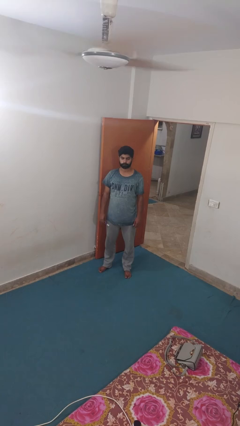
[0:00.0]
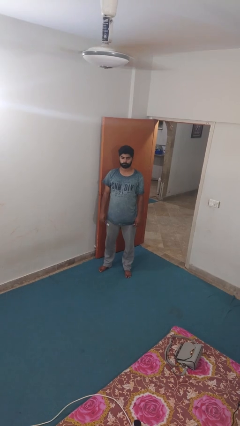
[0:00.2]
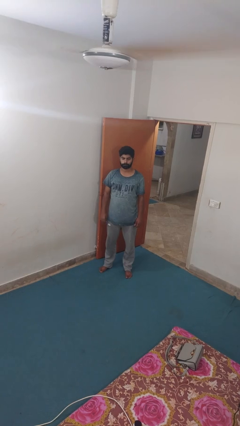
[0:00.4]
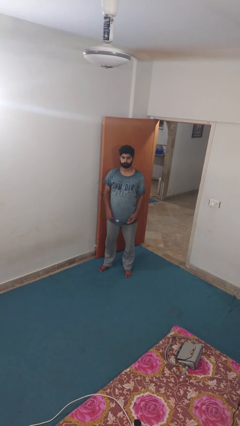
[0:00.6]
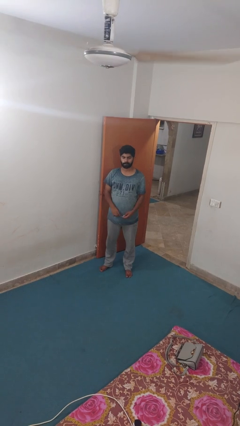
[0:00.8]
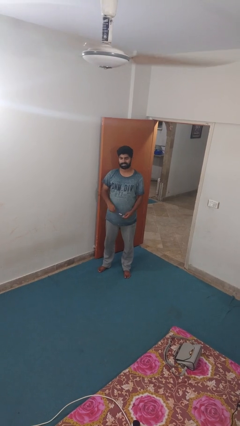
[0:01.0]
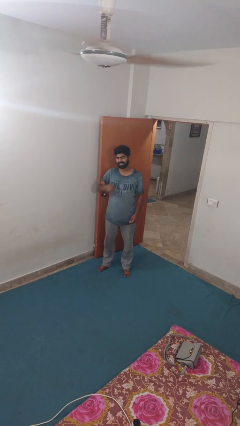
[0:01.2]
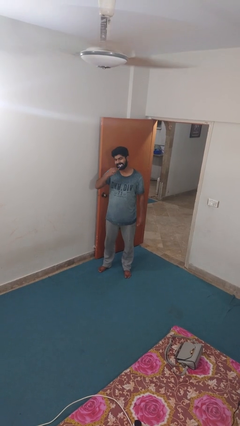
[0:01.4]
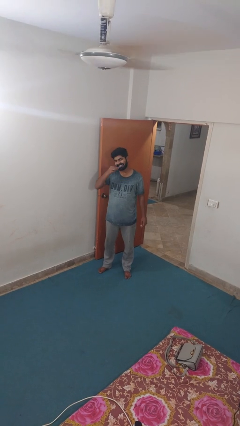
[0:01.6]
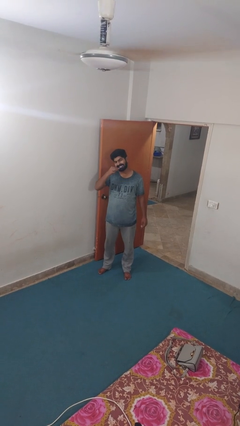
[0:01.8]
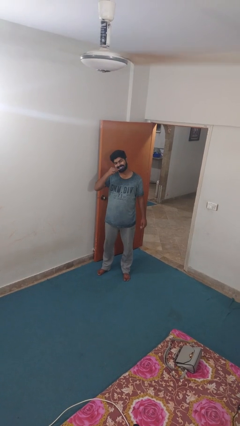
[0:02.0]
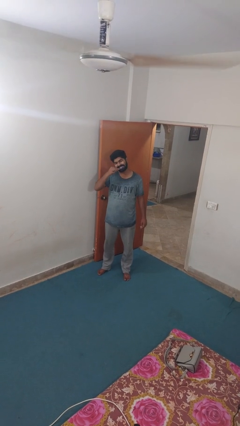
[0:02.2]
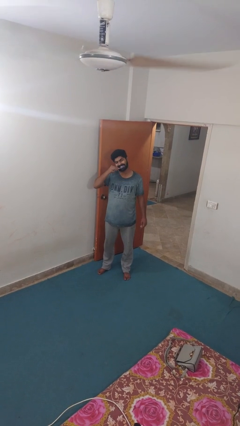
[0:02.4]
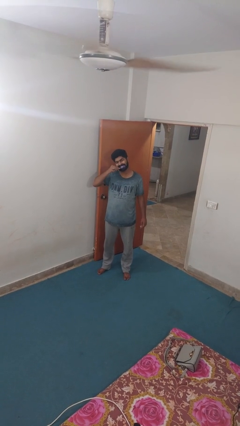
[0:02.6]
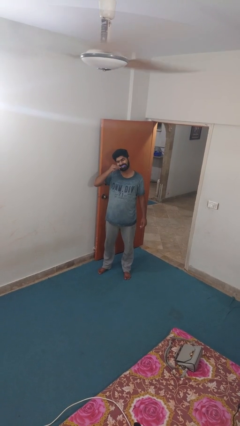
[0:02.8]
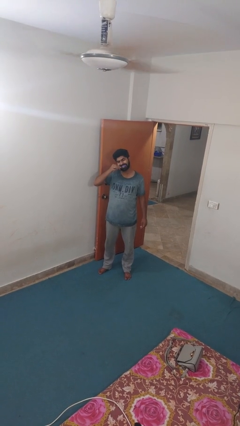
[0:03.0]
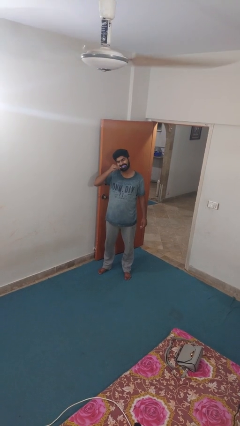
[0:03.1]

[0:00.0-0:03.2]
person brushes teeth

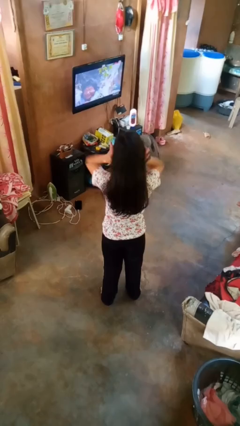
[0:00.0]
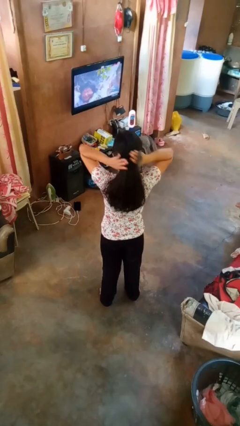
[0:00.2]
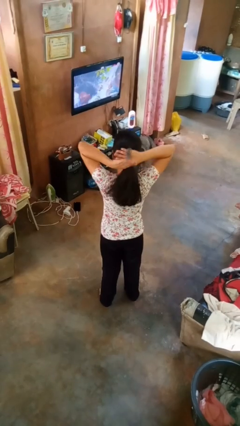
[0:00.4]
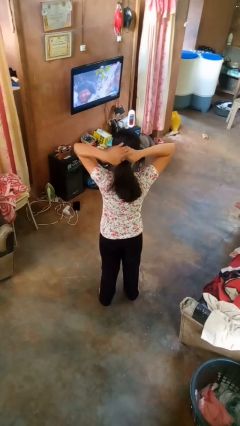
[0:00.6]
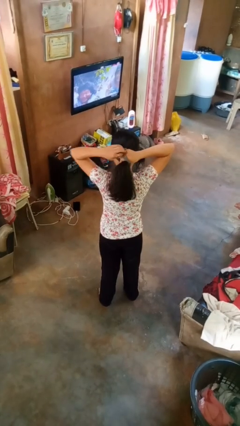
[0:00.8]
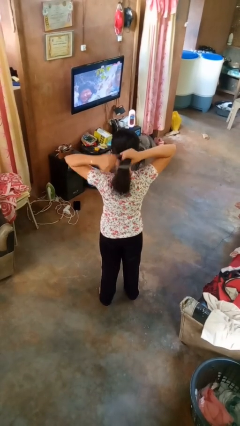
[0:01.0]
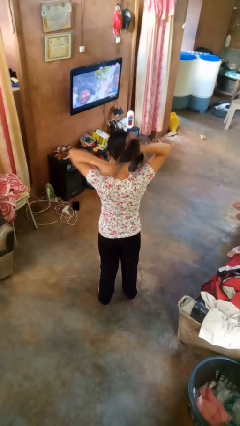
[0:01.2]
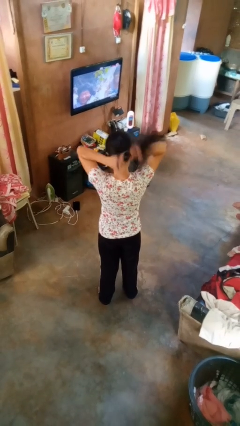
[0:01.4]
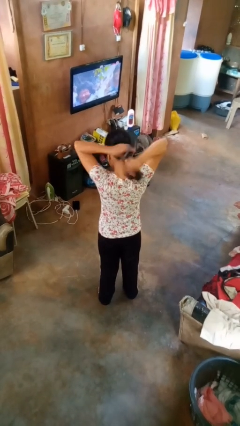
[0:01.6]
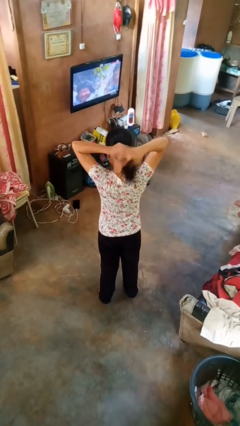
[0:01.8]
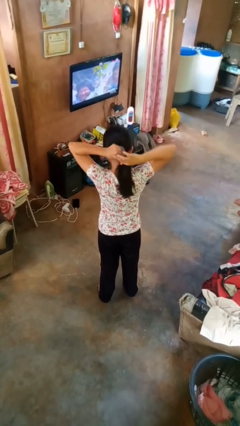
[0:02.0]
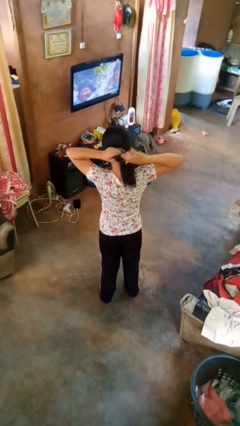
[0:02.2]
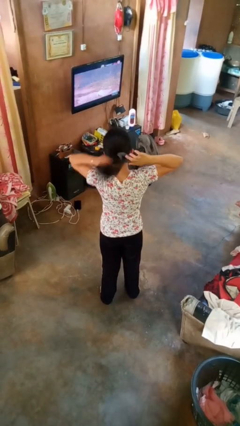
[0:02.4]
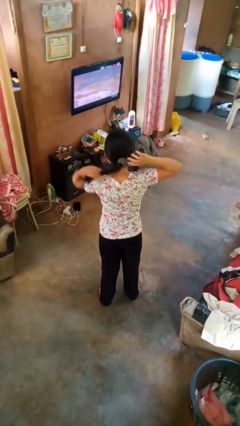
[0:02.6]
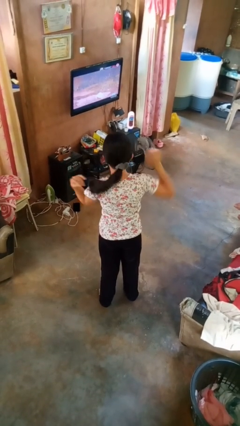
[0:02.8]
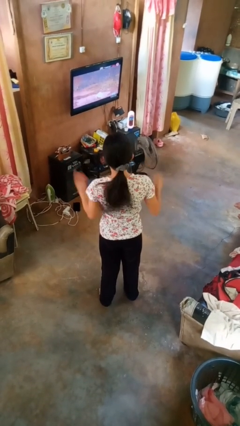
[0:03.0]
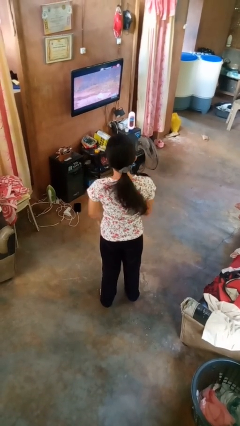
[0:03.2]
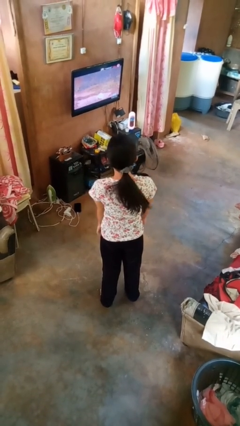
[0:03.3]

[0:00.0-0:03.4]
person puts hair in ponytail

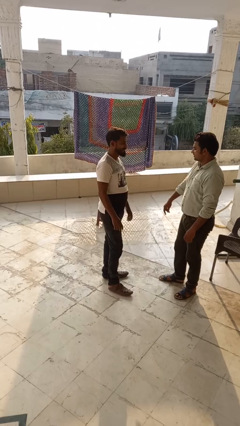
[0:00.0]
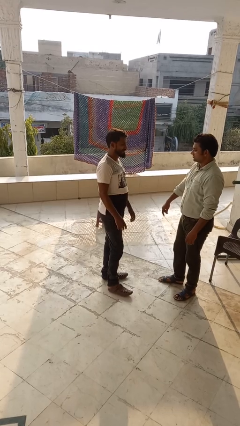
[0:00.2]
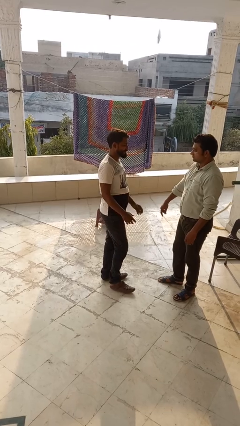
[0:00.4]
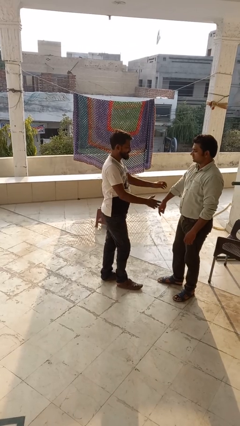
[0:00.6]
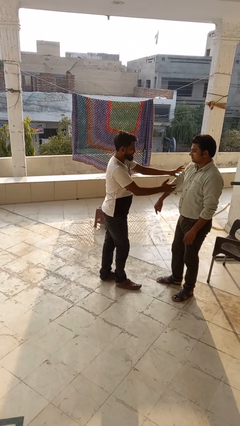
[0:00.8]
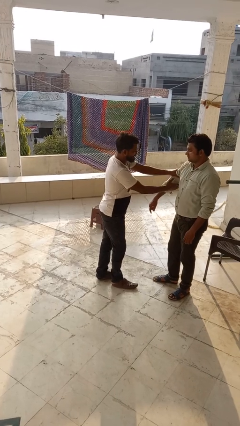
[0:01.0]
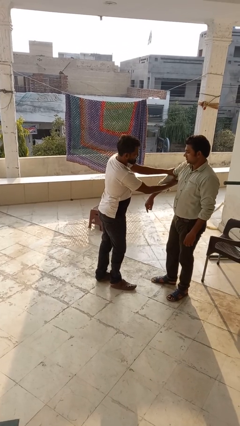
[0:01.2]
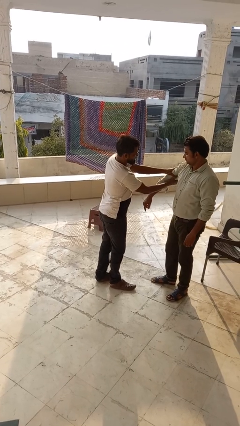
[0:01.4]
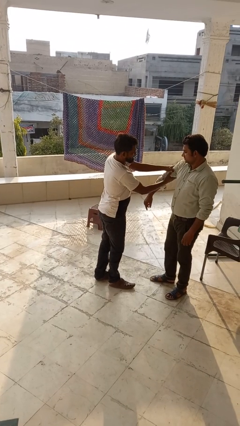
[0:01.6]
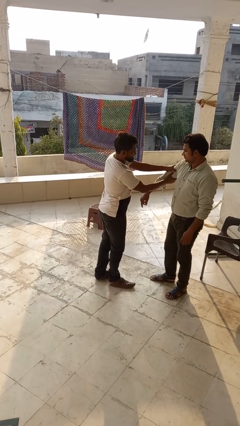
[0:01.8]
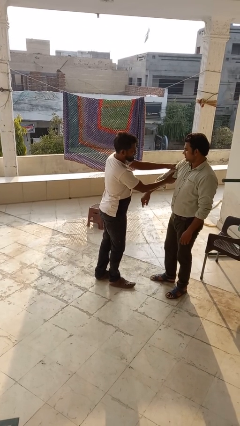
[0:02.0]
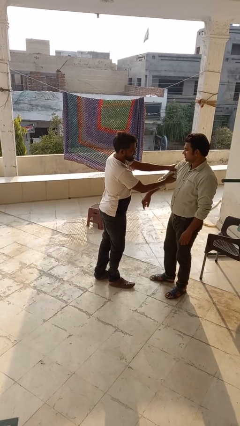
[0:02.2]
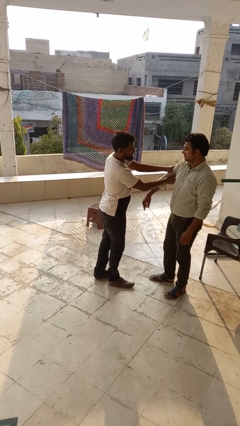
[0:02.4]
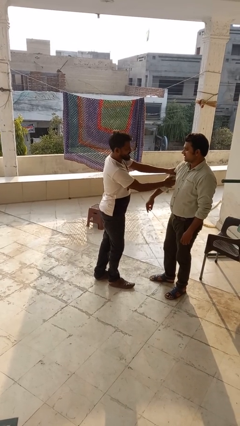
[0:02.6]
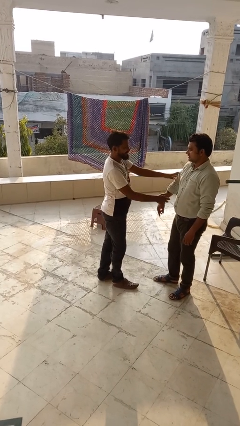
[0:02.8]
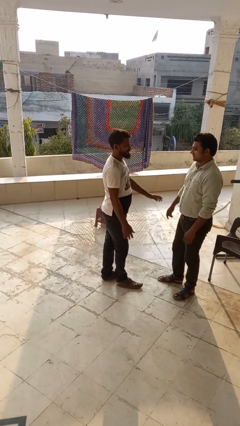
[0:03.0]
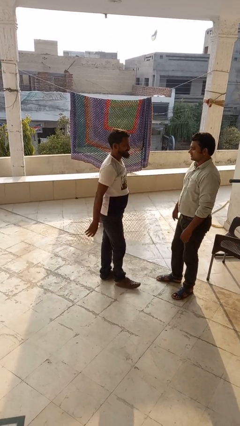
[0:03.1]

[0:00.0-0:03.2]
person grabs person by bicep

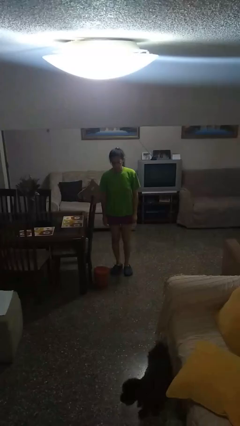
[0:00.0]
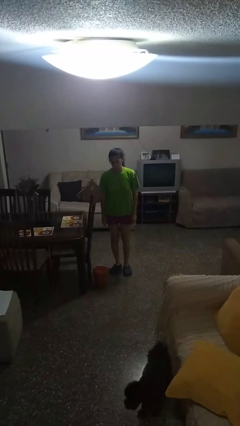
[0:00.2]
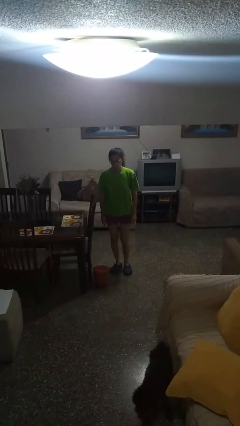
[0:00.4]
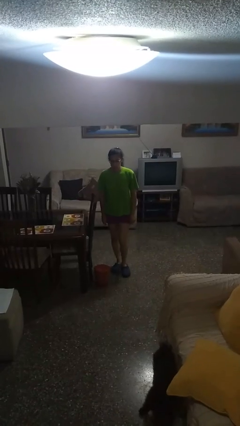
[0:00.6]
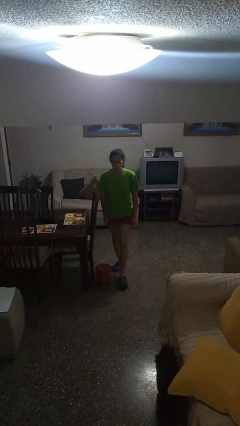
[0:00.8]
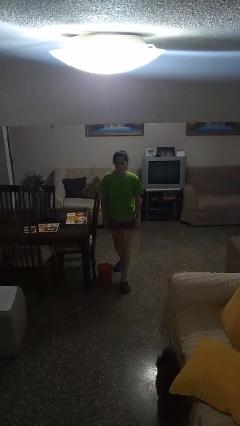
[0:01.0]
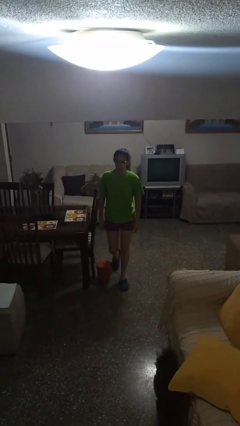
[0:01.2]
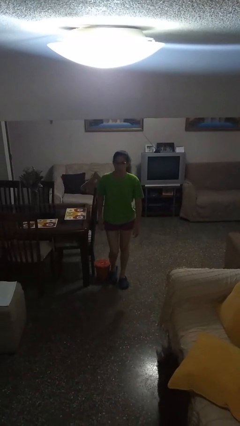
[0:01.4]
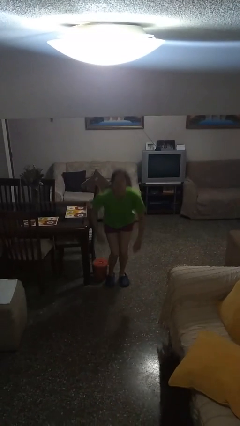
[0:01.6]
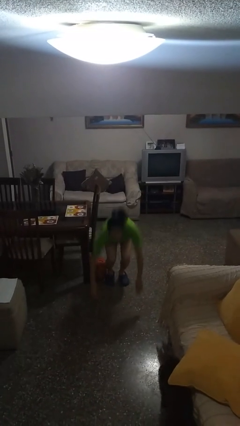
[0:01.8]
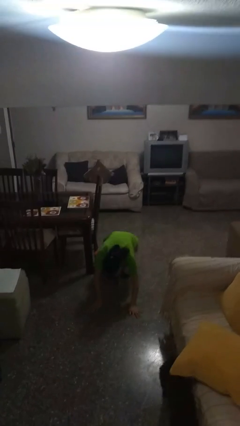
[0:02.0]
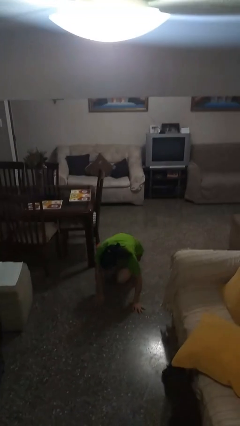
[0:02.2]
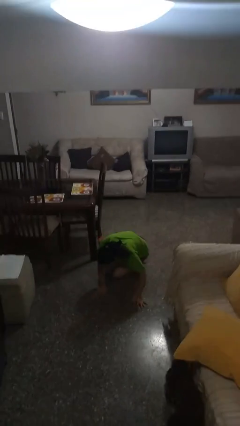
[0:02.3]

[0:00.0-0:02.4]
person trips on object on floor

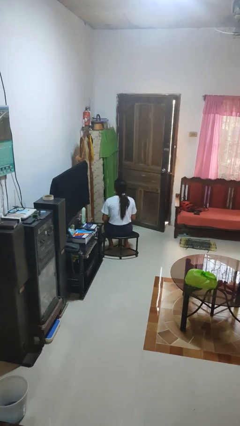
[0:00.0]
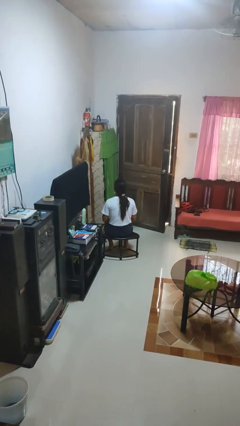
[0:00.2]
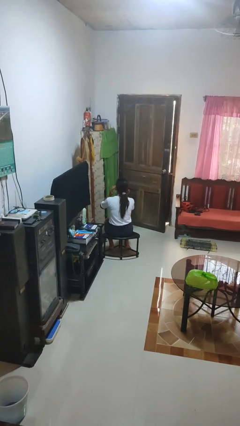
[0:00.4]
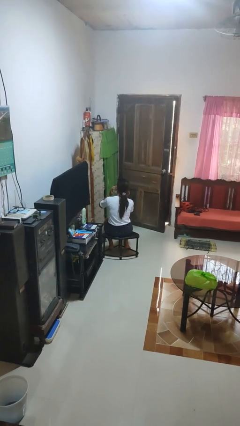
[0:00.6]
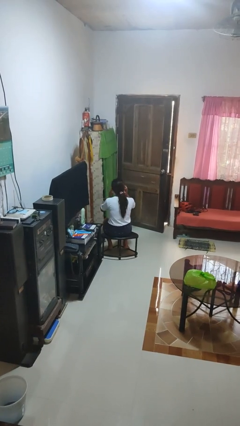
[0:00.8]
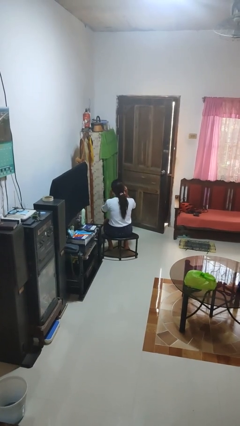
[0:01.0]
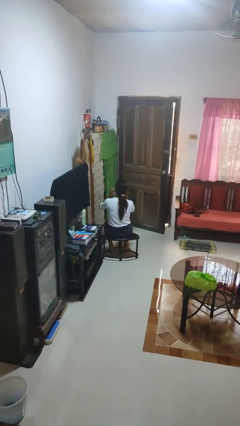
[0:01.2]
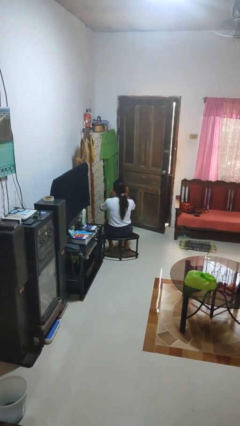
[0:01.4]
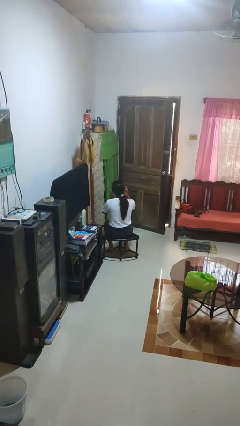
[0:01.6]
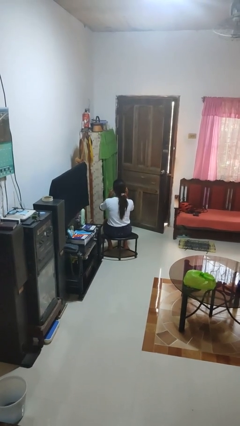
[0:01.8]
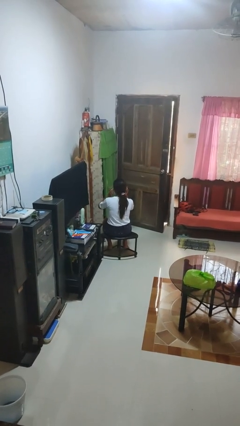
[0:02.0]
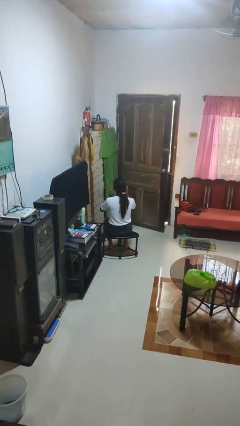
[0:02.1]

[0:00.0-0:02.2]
person puts fingers in ear

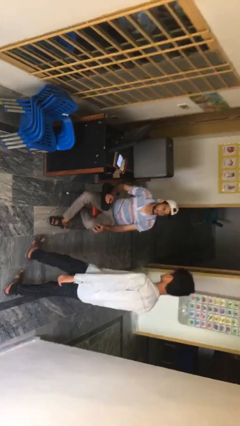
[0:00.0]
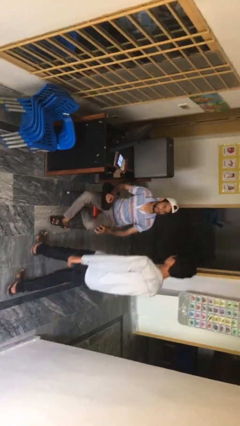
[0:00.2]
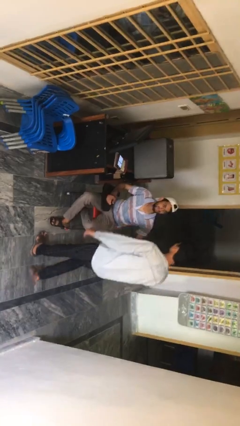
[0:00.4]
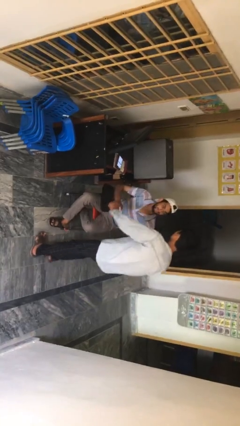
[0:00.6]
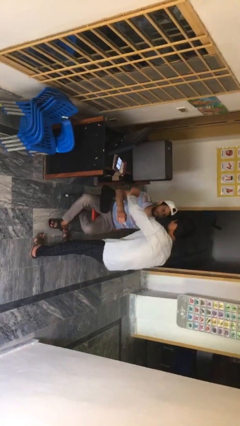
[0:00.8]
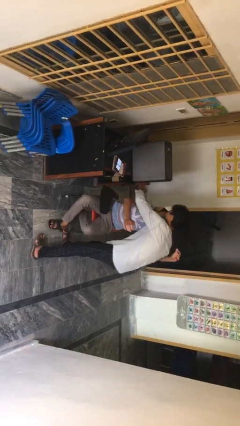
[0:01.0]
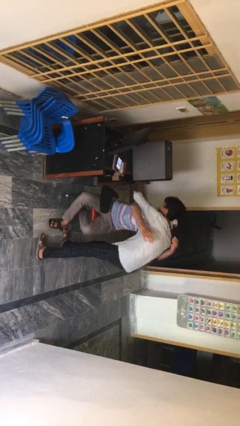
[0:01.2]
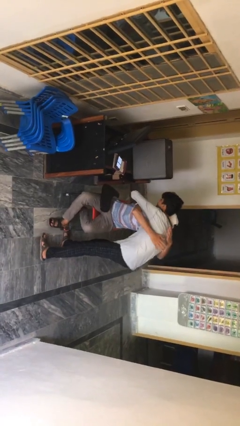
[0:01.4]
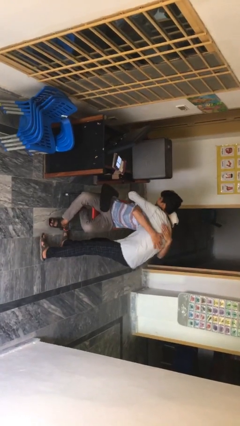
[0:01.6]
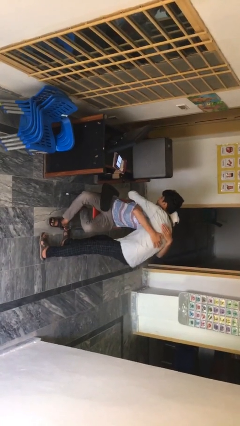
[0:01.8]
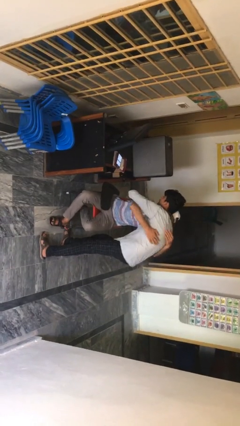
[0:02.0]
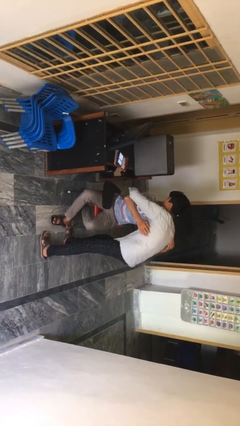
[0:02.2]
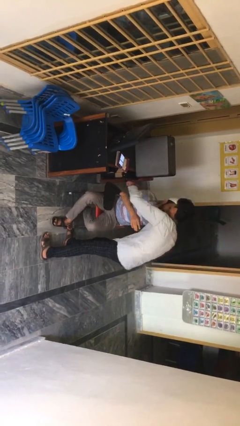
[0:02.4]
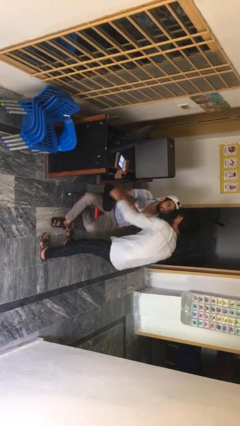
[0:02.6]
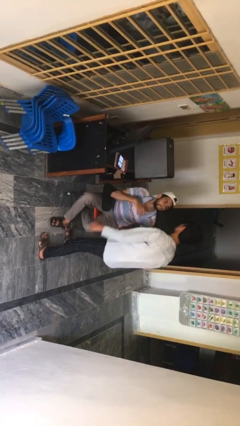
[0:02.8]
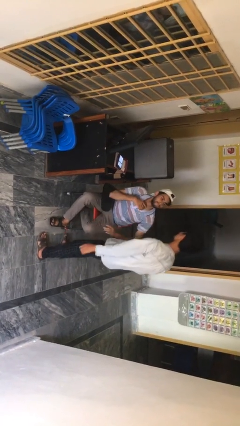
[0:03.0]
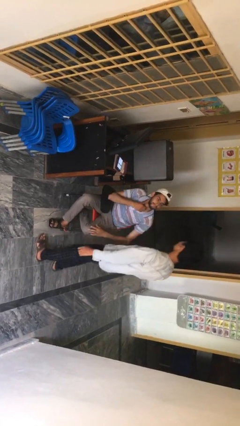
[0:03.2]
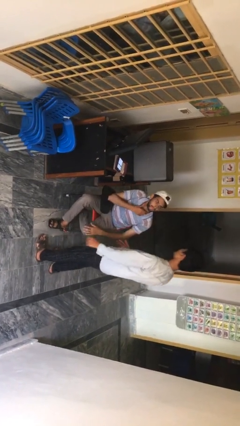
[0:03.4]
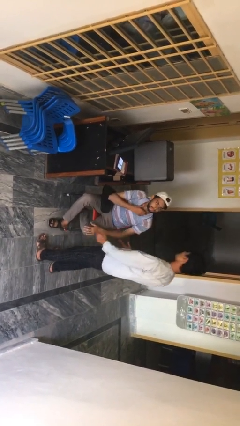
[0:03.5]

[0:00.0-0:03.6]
person embraces person
